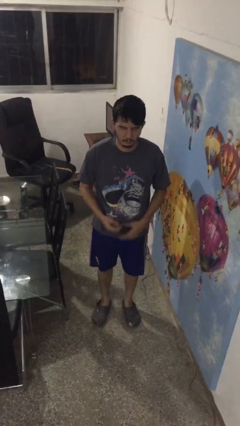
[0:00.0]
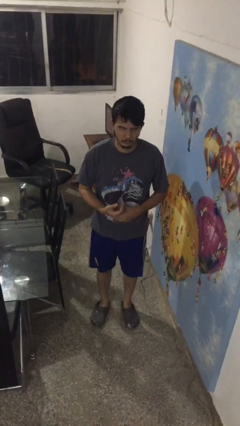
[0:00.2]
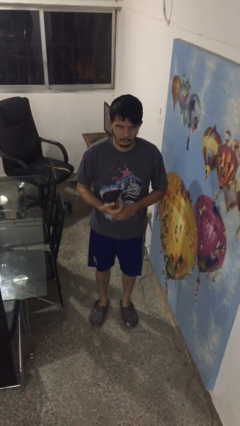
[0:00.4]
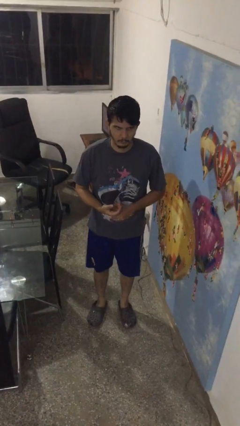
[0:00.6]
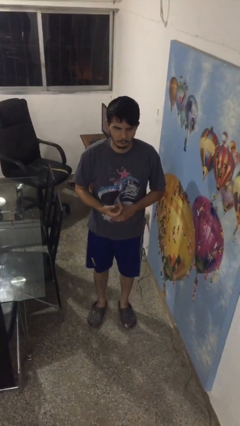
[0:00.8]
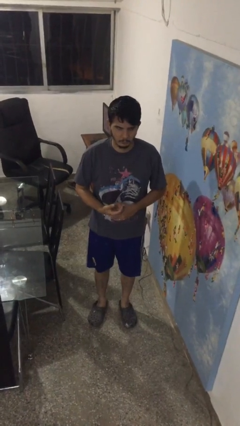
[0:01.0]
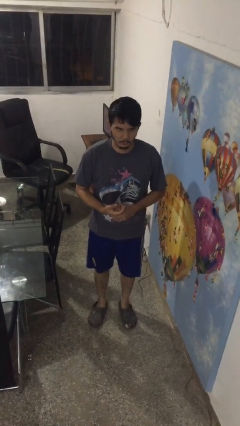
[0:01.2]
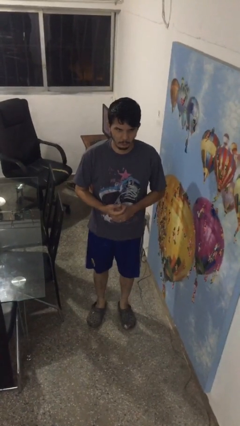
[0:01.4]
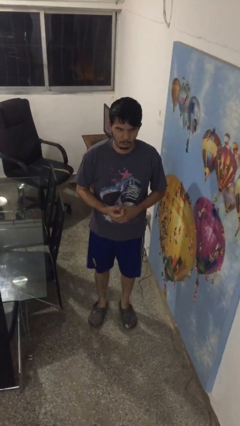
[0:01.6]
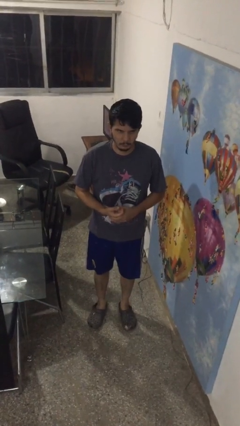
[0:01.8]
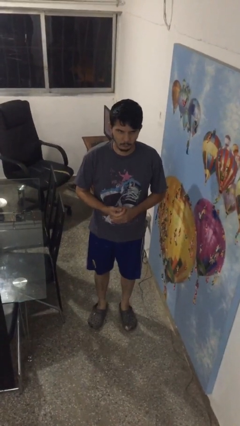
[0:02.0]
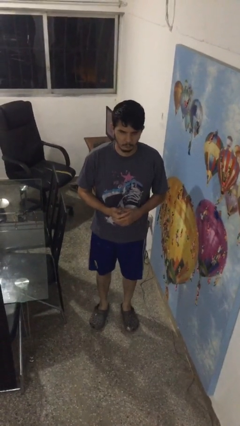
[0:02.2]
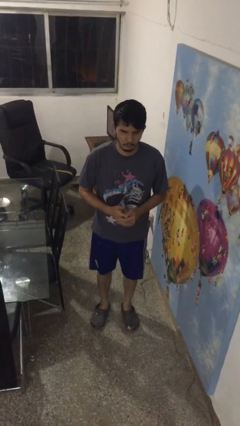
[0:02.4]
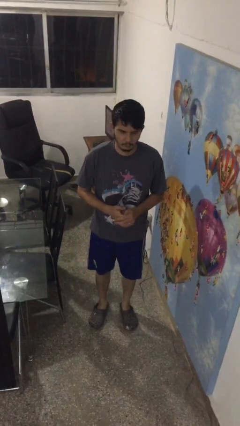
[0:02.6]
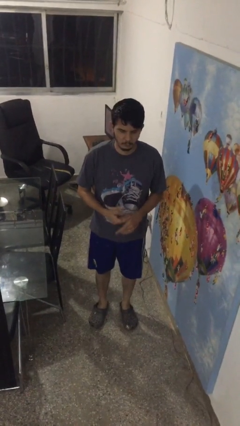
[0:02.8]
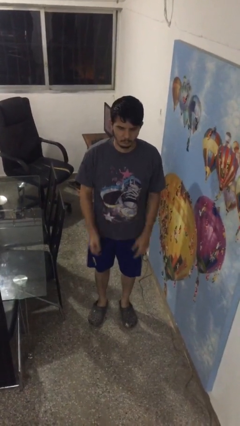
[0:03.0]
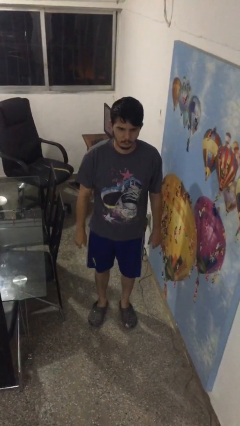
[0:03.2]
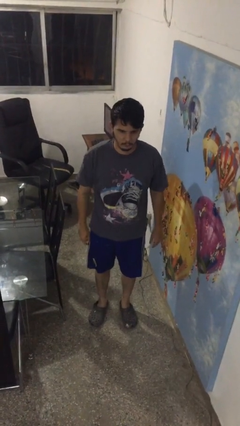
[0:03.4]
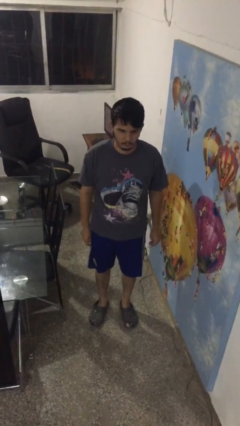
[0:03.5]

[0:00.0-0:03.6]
person cracks knuckles

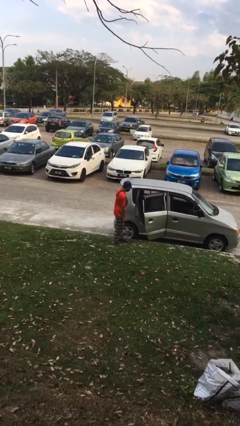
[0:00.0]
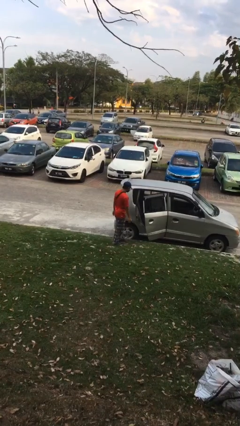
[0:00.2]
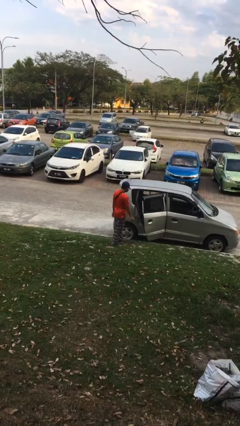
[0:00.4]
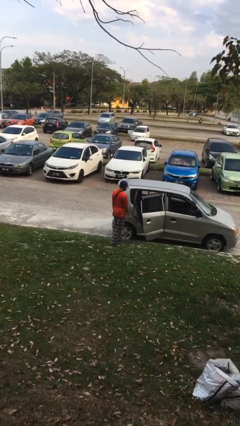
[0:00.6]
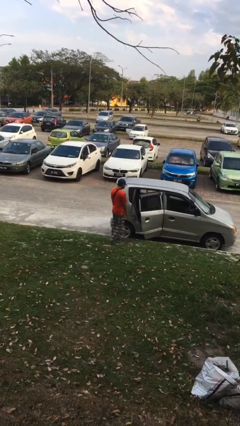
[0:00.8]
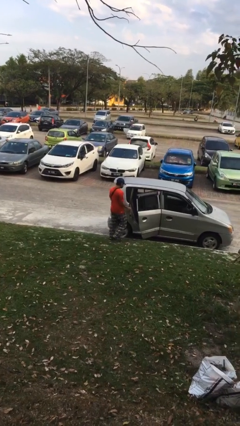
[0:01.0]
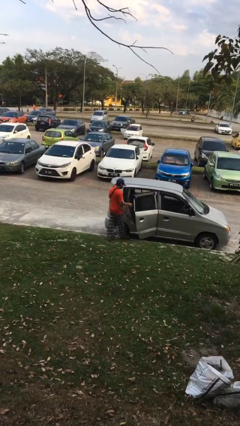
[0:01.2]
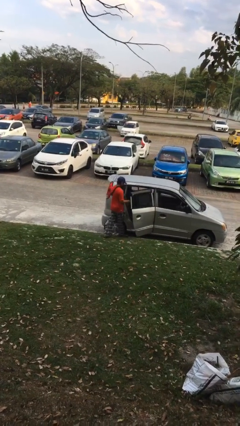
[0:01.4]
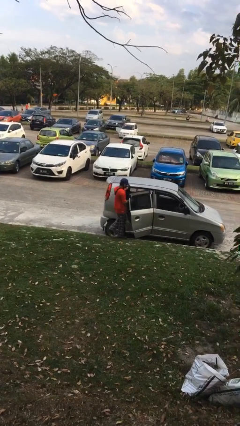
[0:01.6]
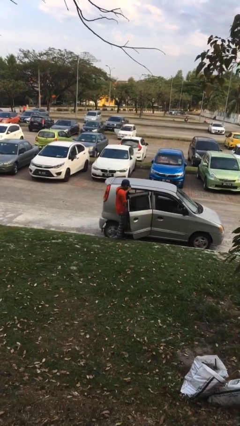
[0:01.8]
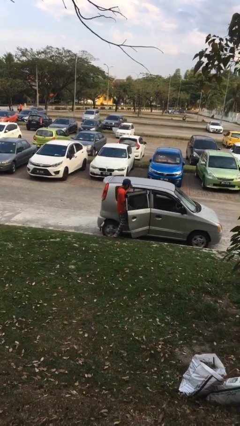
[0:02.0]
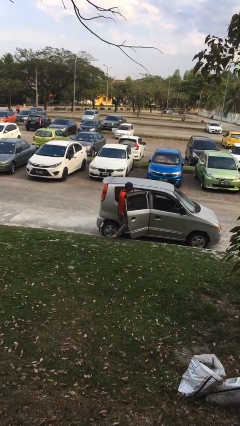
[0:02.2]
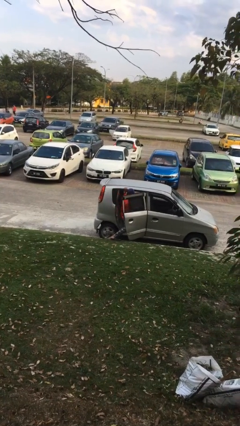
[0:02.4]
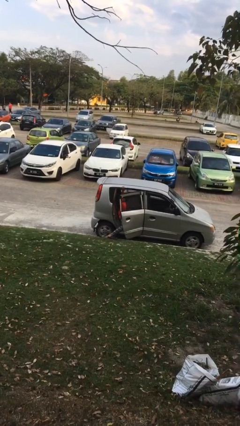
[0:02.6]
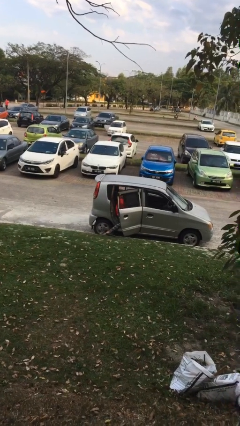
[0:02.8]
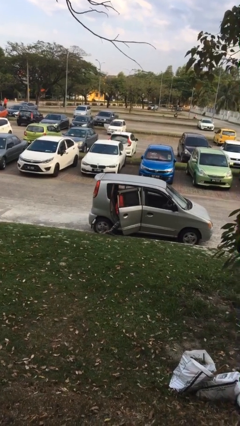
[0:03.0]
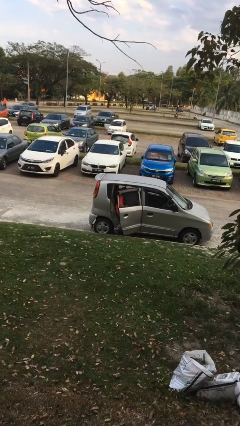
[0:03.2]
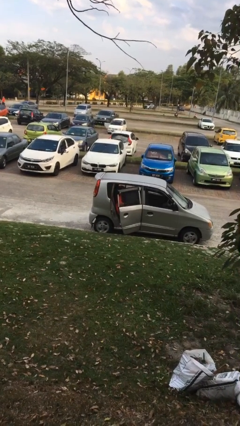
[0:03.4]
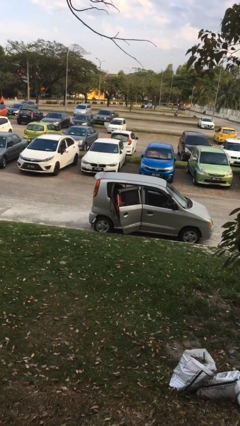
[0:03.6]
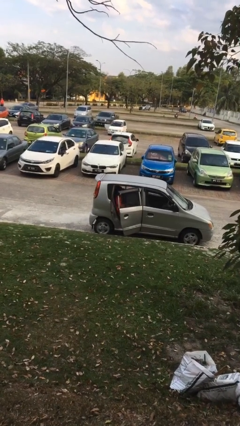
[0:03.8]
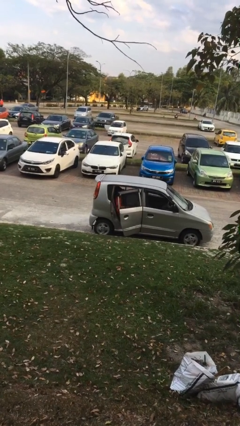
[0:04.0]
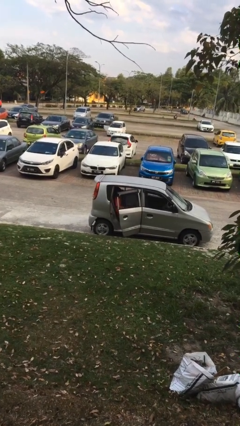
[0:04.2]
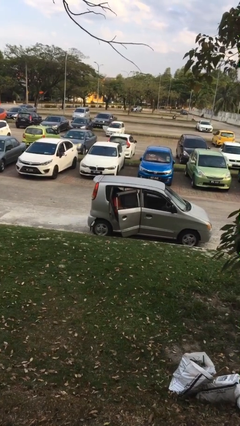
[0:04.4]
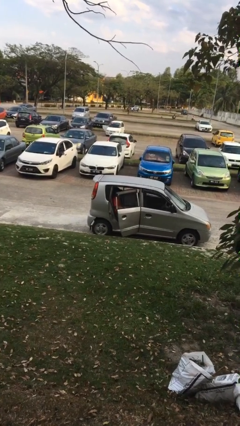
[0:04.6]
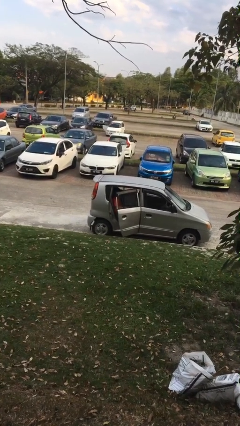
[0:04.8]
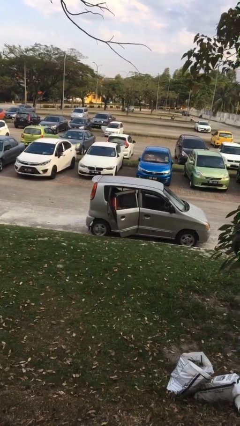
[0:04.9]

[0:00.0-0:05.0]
person enters car

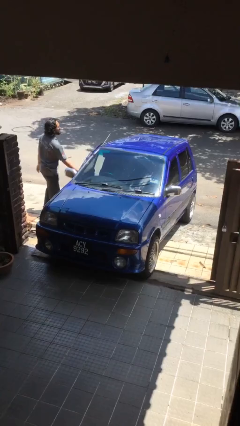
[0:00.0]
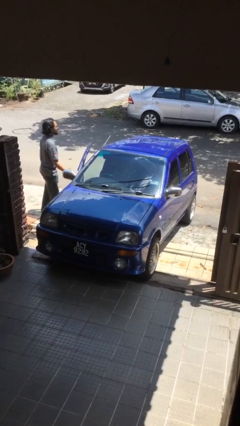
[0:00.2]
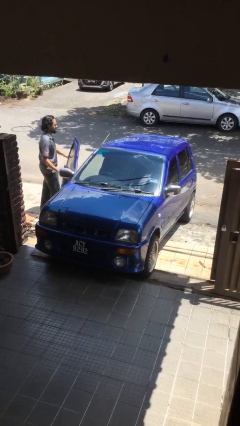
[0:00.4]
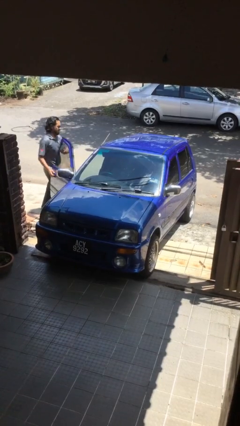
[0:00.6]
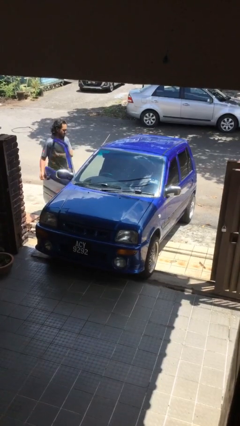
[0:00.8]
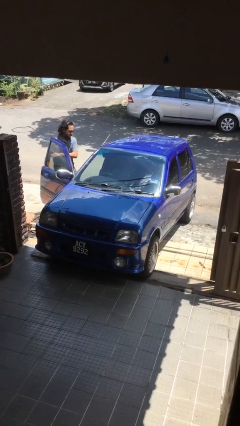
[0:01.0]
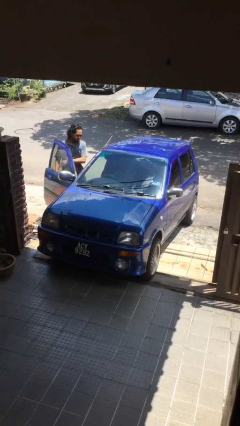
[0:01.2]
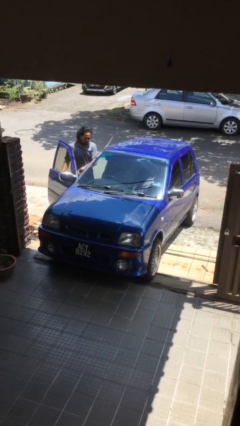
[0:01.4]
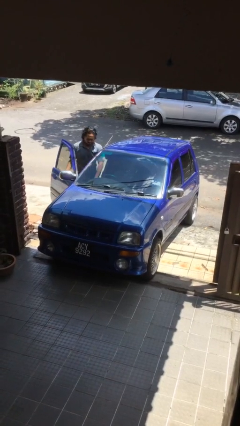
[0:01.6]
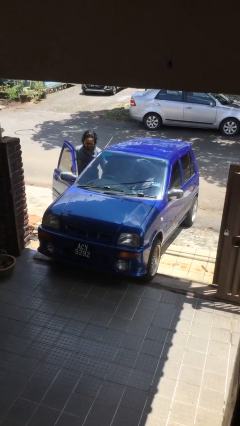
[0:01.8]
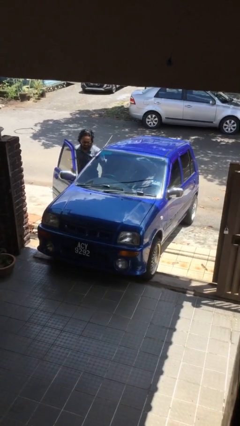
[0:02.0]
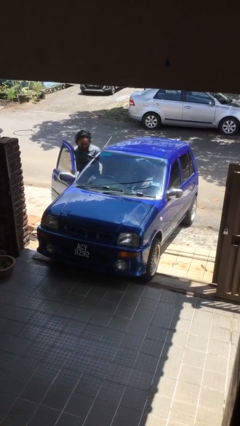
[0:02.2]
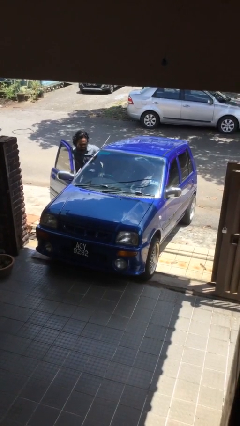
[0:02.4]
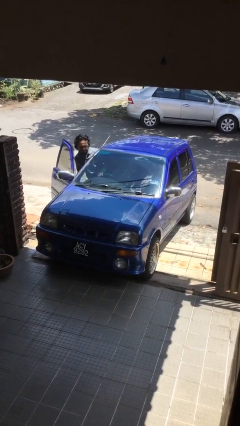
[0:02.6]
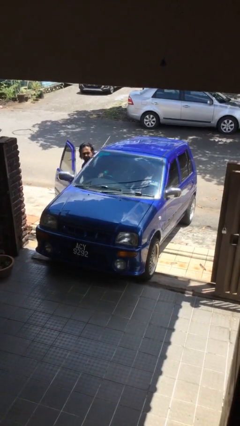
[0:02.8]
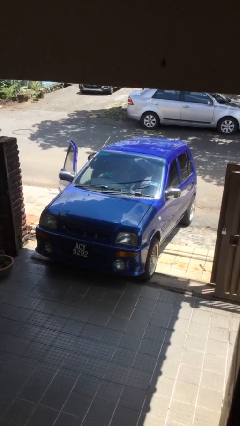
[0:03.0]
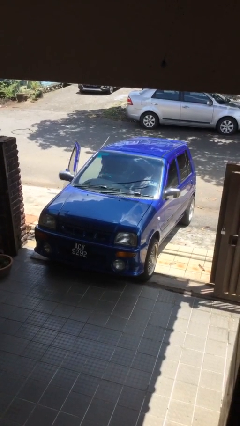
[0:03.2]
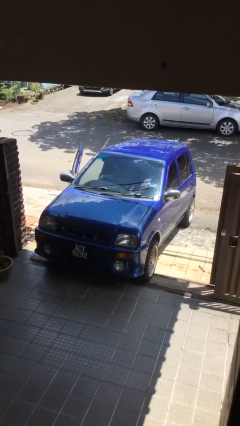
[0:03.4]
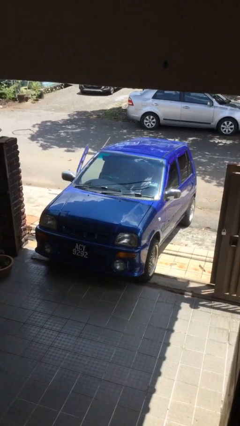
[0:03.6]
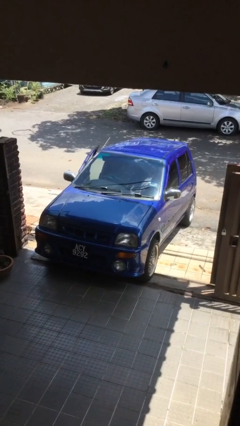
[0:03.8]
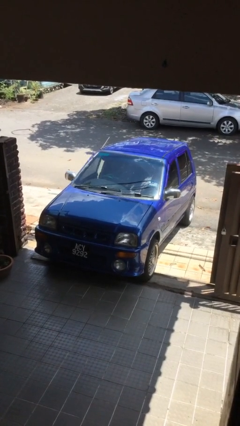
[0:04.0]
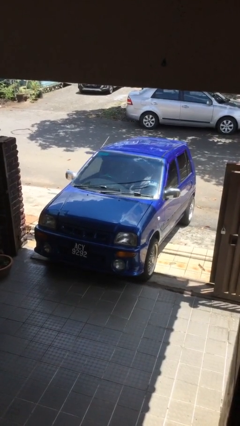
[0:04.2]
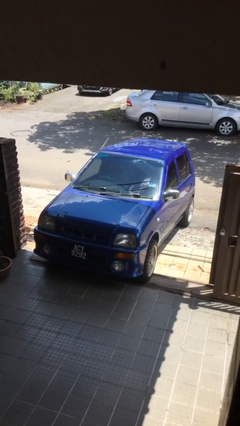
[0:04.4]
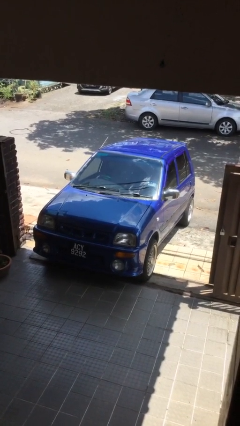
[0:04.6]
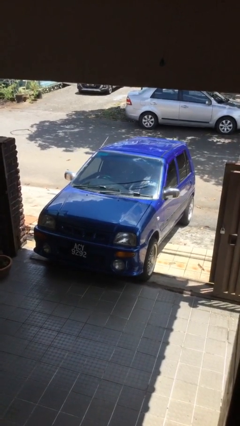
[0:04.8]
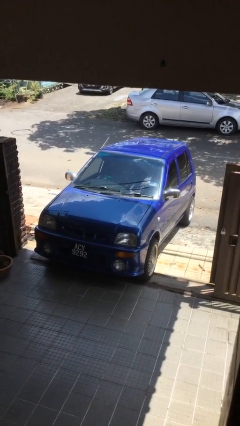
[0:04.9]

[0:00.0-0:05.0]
car picks up person

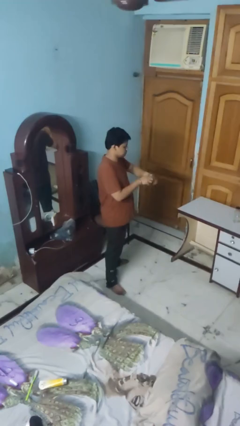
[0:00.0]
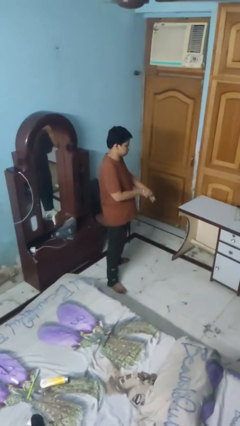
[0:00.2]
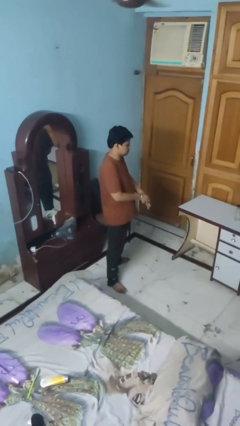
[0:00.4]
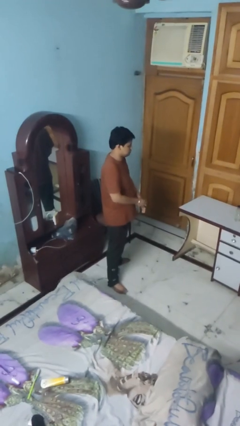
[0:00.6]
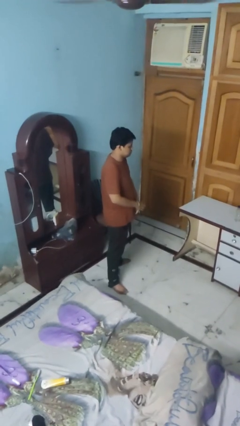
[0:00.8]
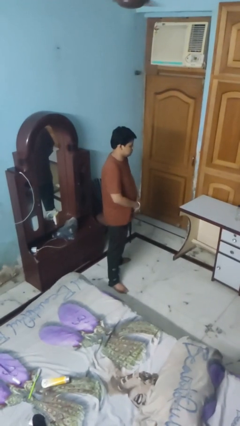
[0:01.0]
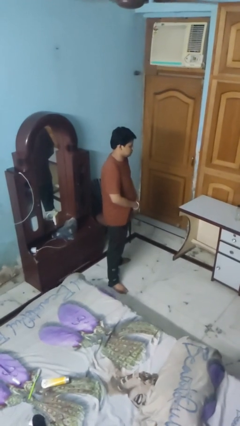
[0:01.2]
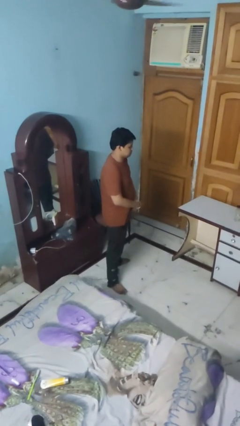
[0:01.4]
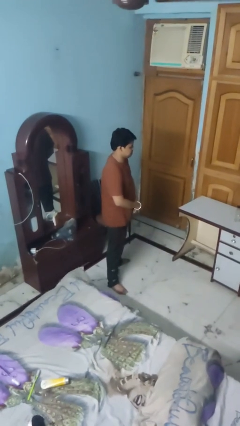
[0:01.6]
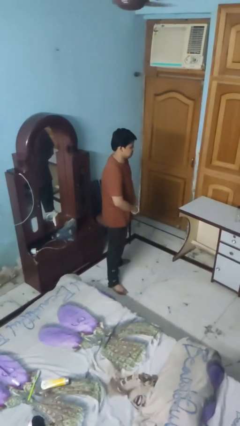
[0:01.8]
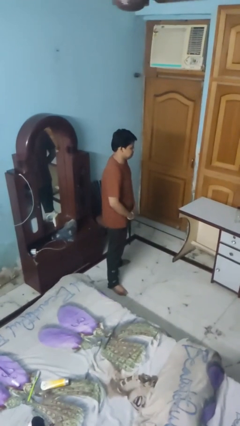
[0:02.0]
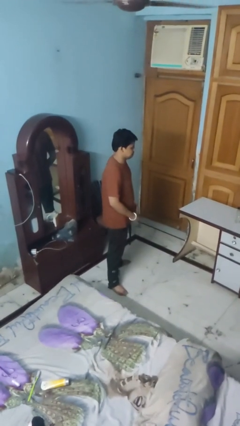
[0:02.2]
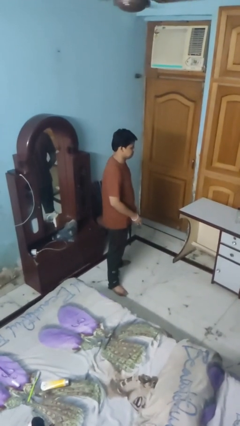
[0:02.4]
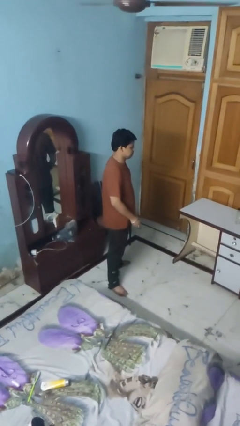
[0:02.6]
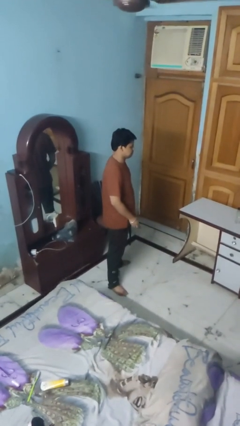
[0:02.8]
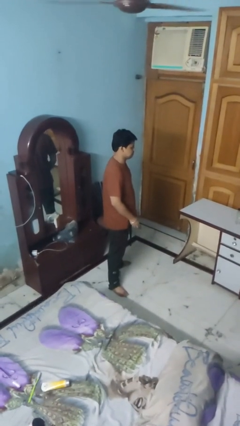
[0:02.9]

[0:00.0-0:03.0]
person takes off wristwatch

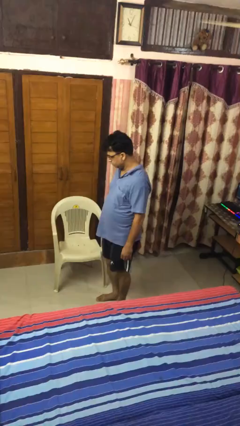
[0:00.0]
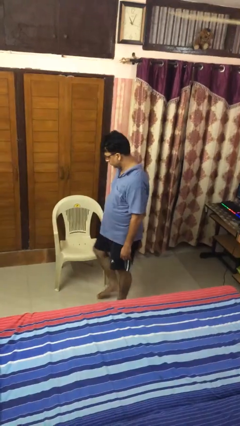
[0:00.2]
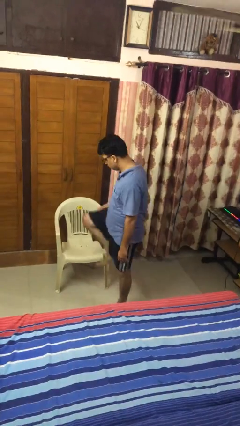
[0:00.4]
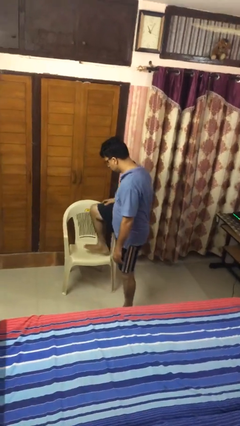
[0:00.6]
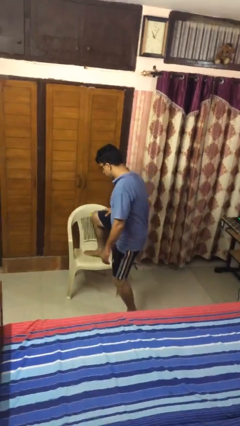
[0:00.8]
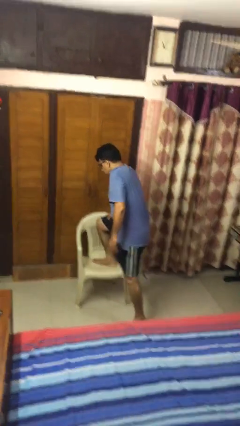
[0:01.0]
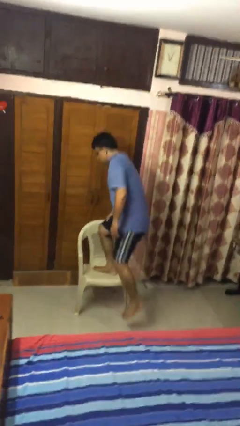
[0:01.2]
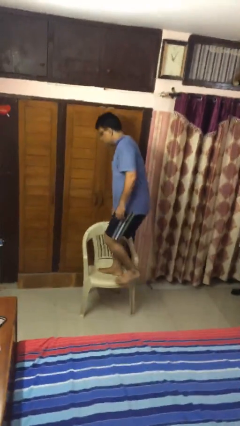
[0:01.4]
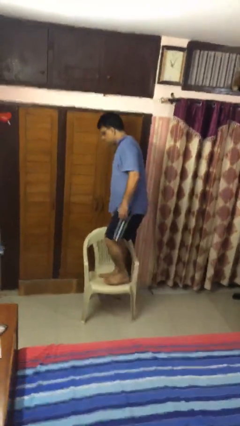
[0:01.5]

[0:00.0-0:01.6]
person climbs on chair
